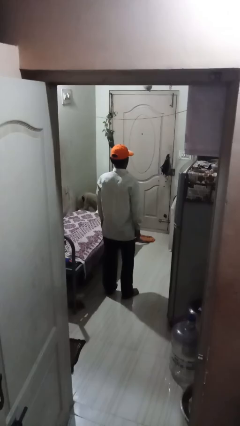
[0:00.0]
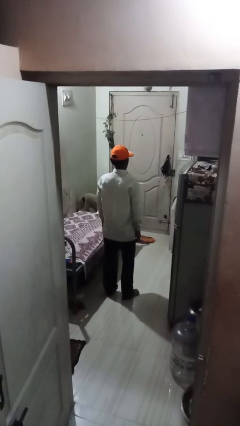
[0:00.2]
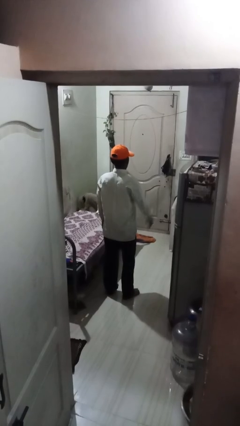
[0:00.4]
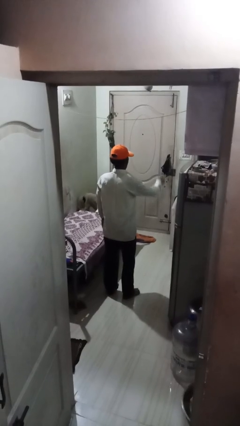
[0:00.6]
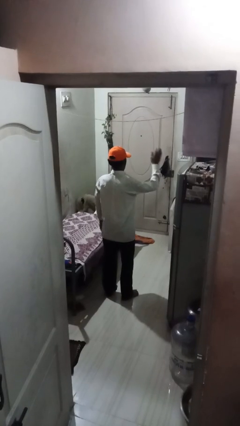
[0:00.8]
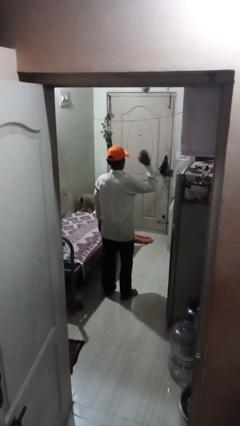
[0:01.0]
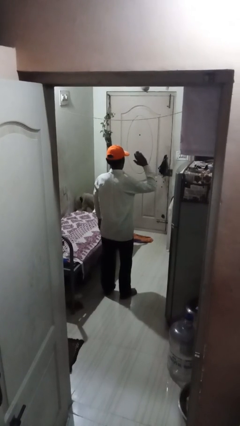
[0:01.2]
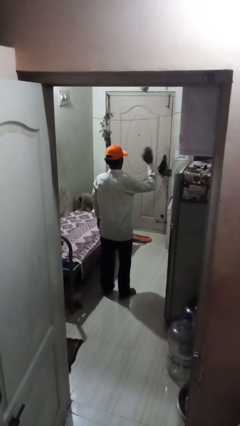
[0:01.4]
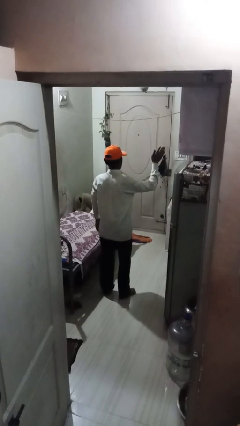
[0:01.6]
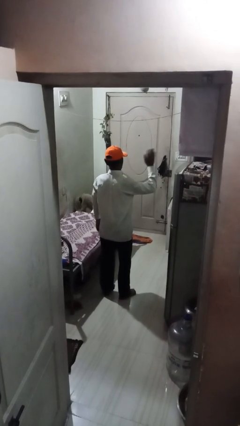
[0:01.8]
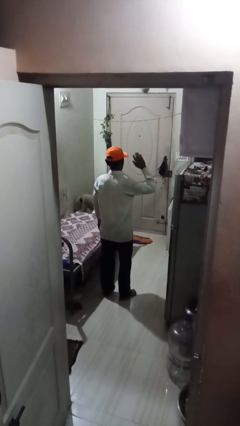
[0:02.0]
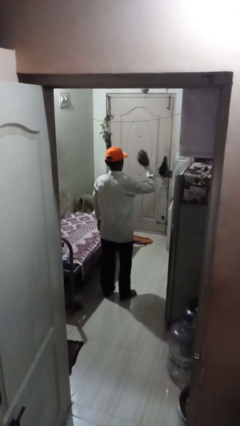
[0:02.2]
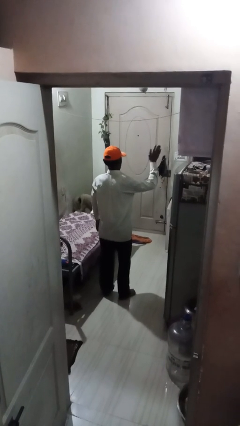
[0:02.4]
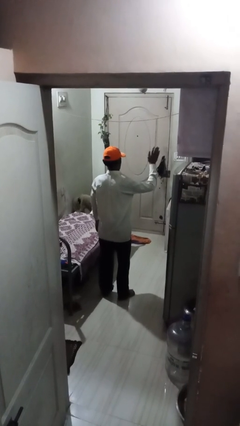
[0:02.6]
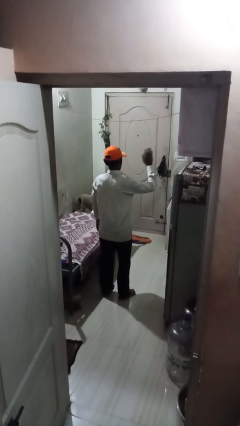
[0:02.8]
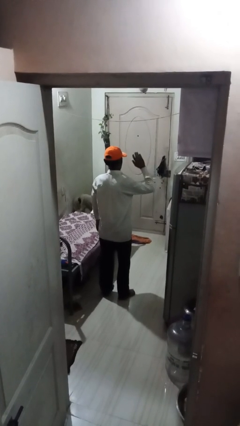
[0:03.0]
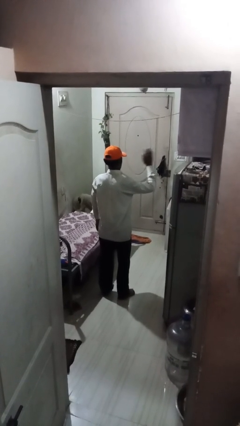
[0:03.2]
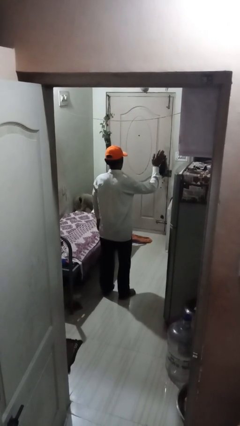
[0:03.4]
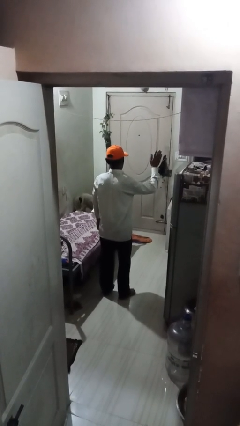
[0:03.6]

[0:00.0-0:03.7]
person waves at person

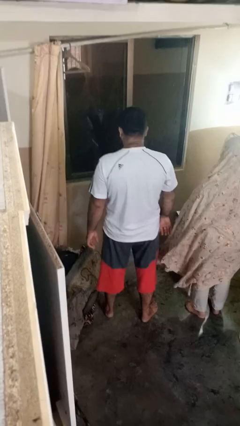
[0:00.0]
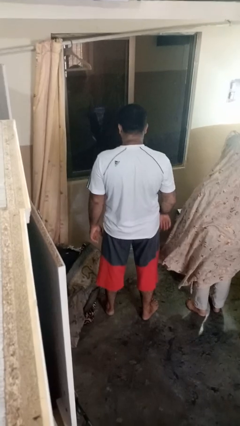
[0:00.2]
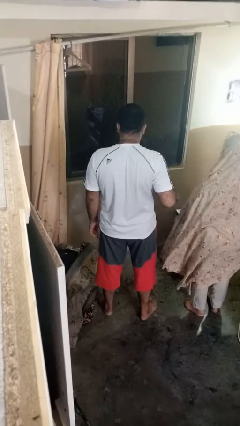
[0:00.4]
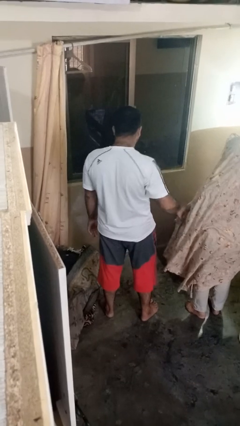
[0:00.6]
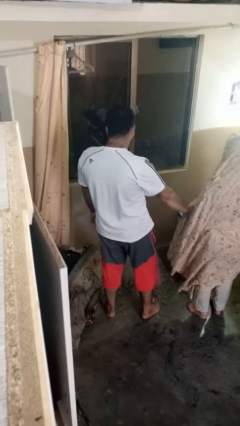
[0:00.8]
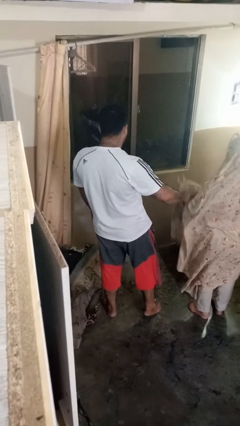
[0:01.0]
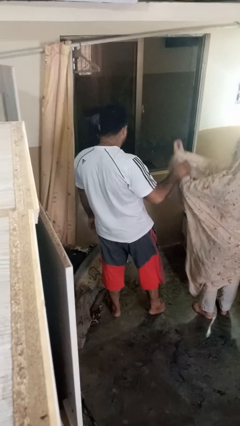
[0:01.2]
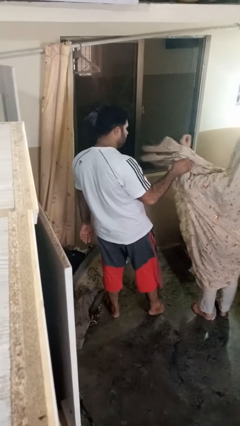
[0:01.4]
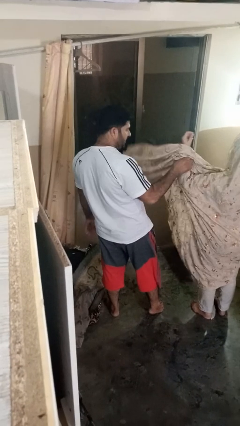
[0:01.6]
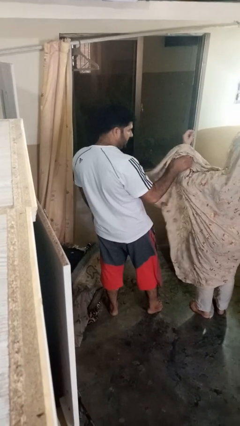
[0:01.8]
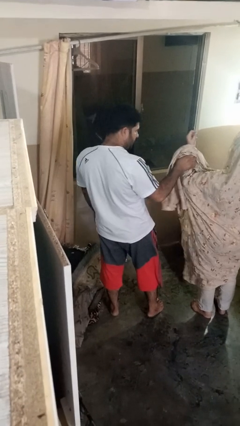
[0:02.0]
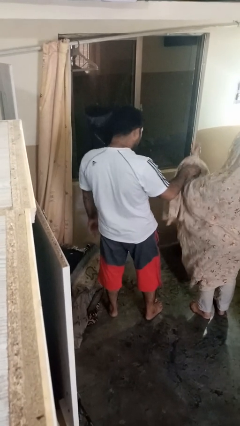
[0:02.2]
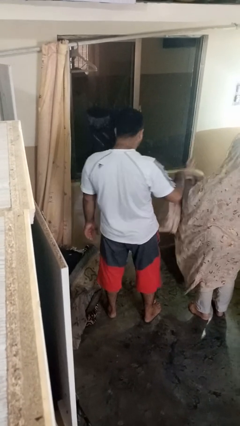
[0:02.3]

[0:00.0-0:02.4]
person grabs person by forearm

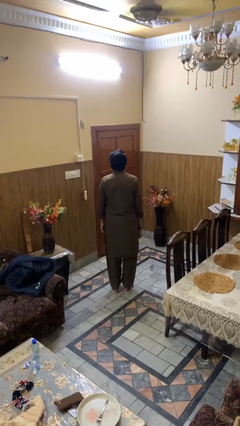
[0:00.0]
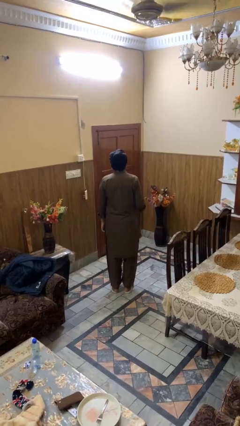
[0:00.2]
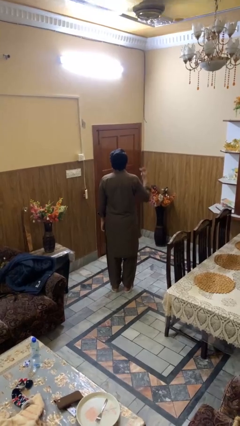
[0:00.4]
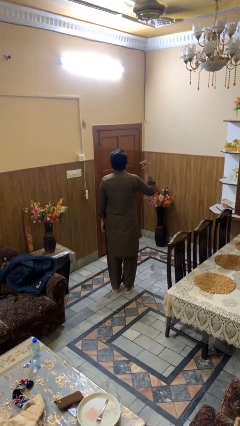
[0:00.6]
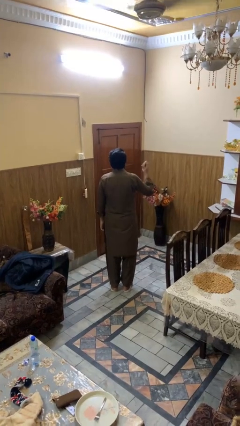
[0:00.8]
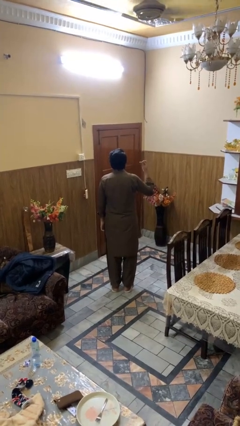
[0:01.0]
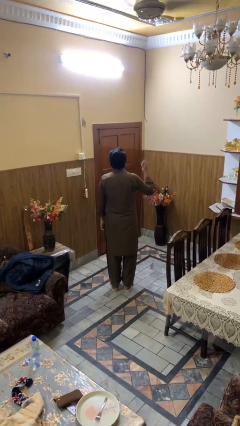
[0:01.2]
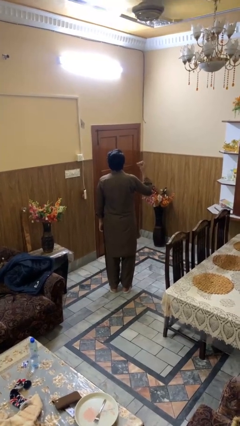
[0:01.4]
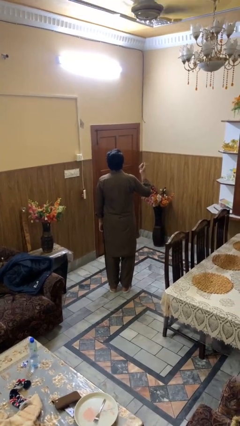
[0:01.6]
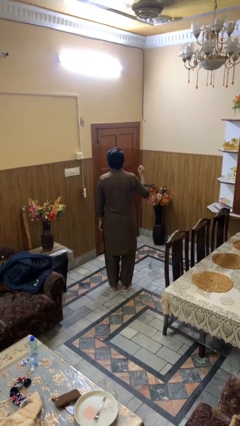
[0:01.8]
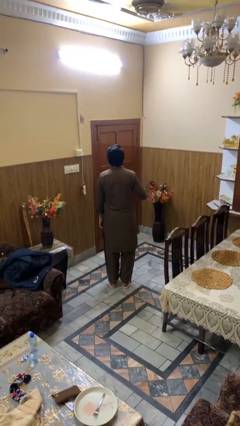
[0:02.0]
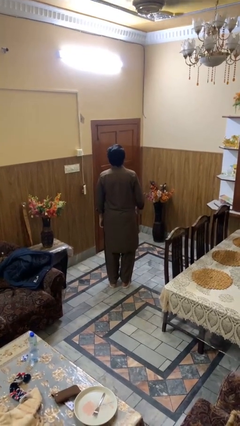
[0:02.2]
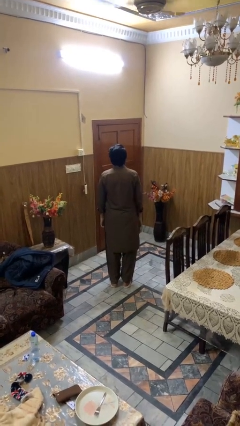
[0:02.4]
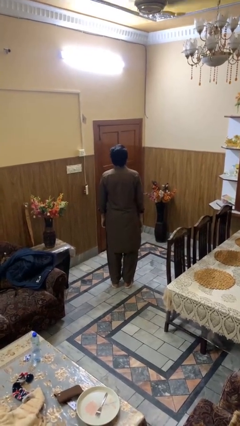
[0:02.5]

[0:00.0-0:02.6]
person snaps fingers

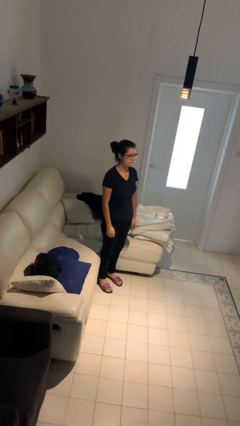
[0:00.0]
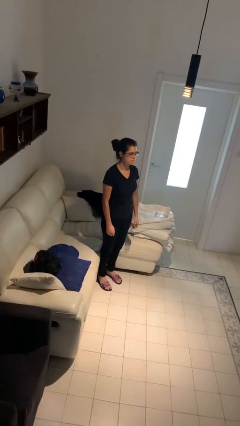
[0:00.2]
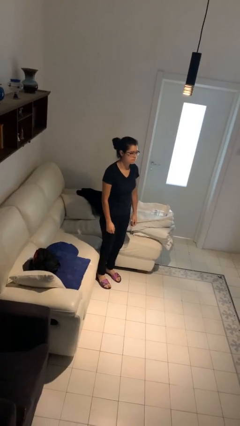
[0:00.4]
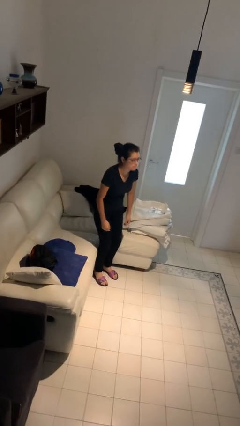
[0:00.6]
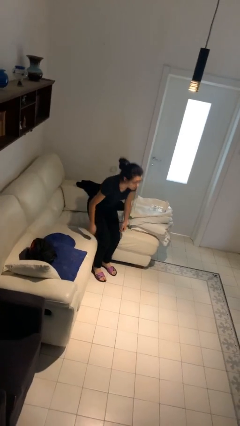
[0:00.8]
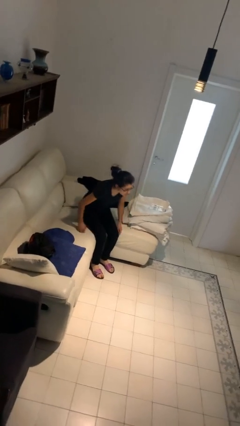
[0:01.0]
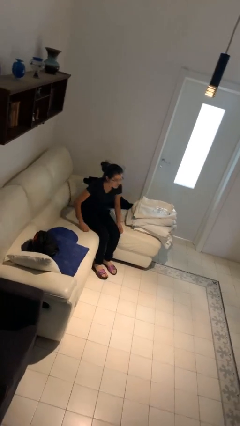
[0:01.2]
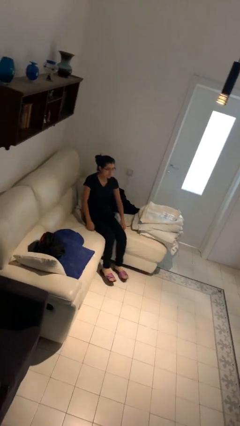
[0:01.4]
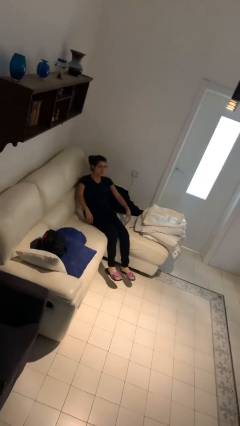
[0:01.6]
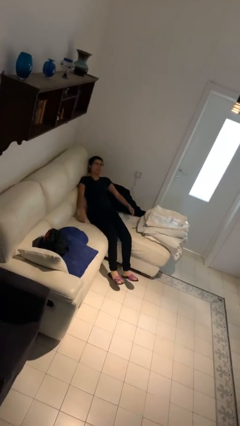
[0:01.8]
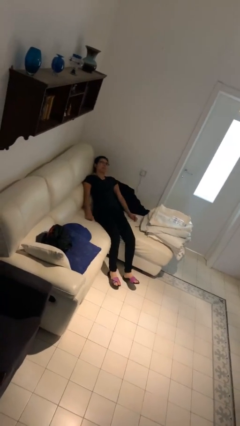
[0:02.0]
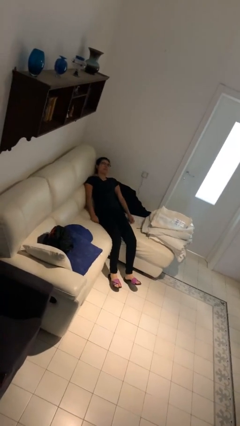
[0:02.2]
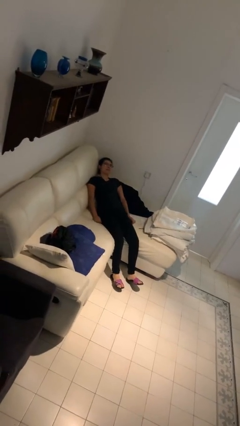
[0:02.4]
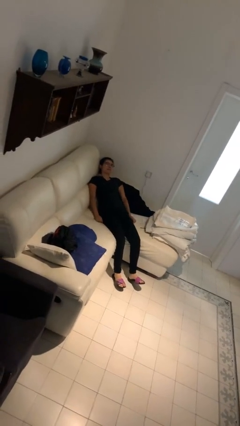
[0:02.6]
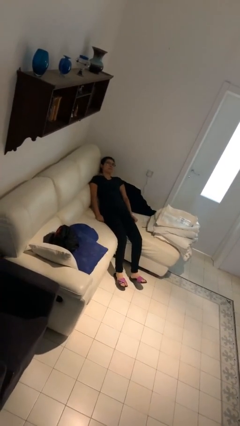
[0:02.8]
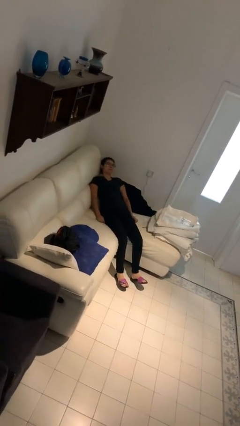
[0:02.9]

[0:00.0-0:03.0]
person lies down on couch

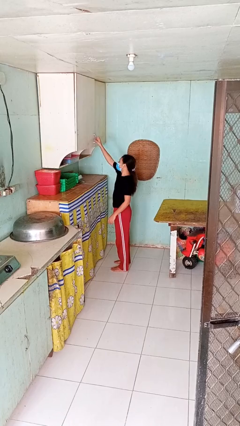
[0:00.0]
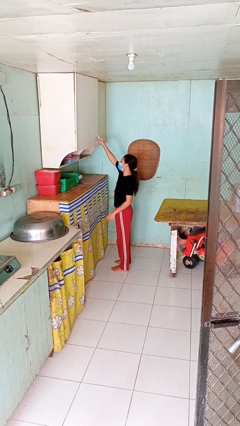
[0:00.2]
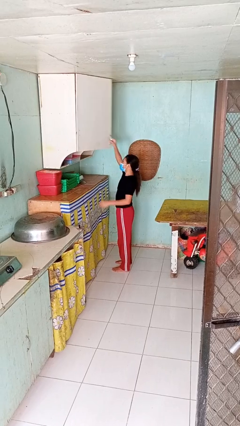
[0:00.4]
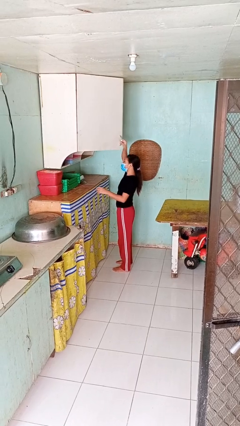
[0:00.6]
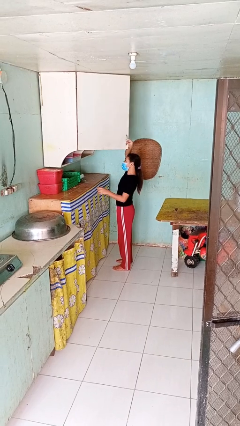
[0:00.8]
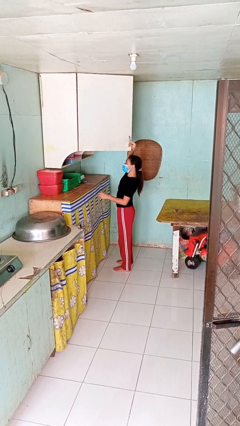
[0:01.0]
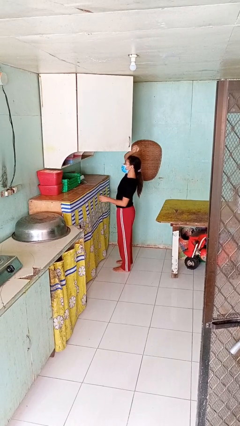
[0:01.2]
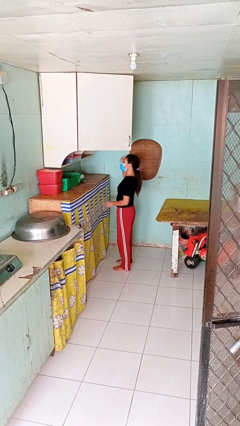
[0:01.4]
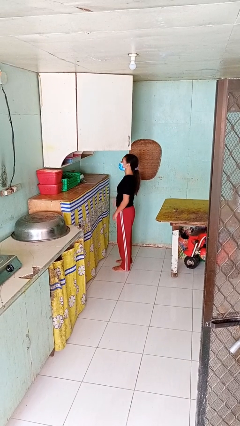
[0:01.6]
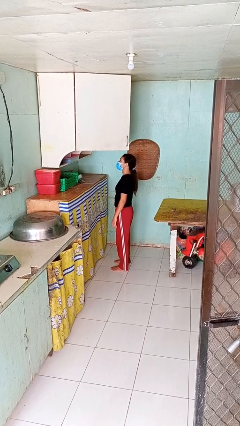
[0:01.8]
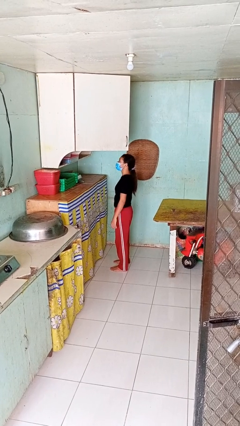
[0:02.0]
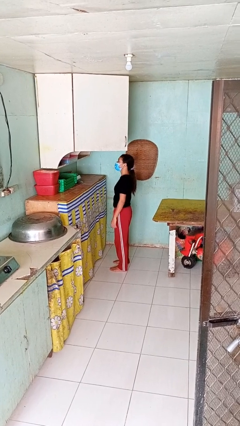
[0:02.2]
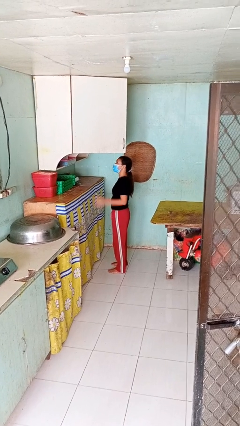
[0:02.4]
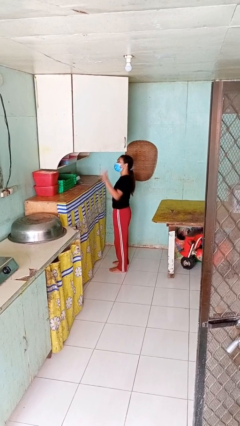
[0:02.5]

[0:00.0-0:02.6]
person opens cabinet

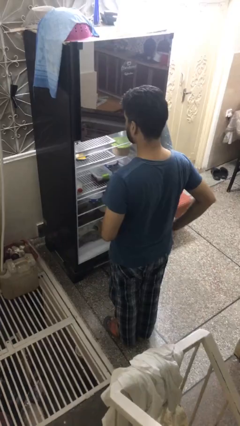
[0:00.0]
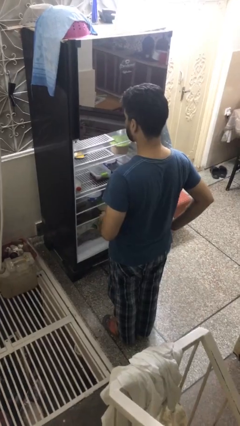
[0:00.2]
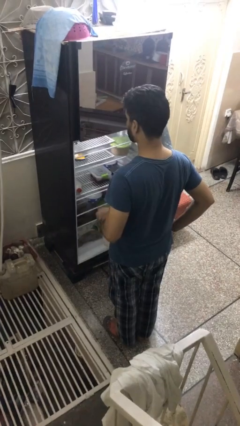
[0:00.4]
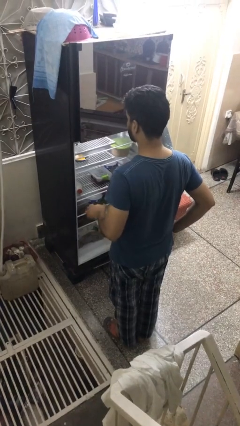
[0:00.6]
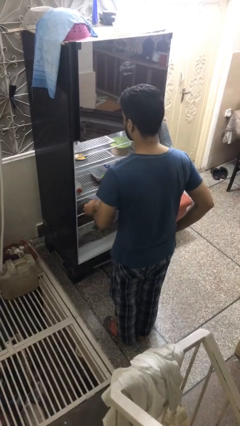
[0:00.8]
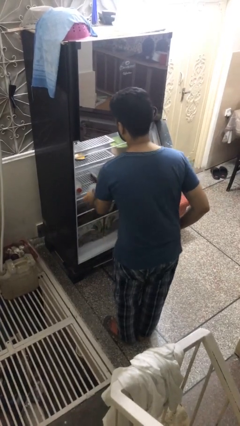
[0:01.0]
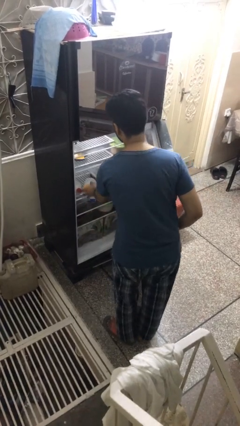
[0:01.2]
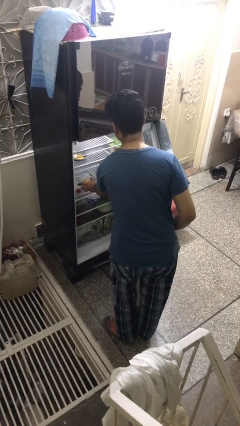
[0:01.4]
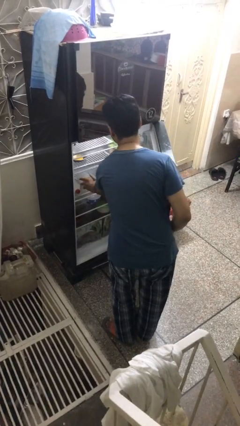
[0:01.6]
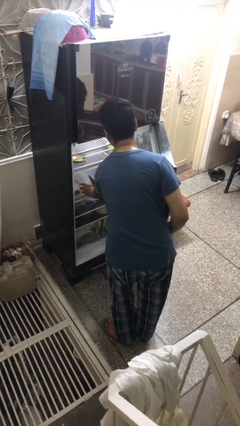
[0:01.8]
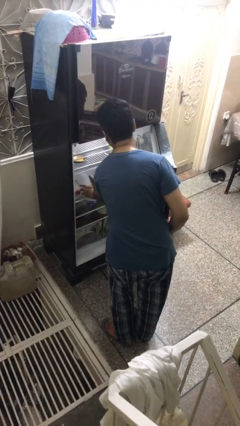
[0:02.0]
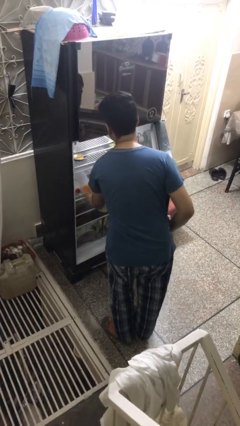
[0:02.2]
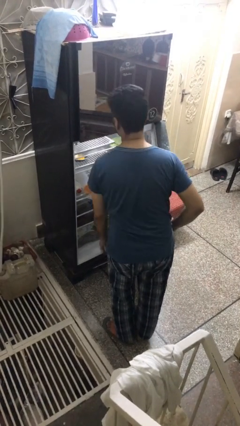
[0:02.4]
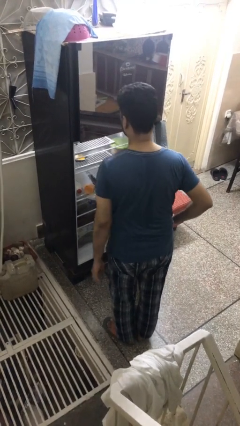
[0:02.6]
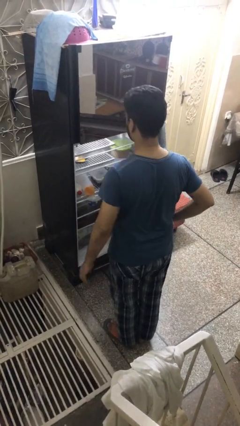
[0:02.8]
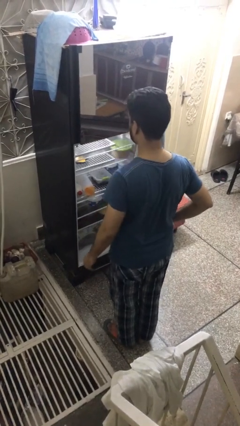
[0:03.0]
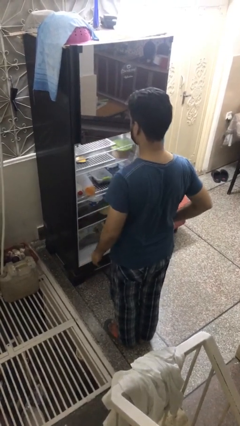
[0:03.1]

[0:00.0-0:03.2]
person puts object into refrigerator
